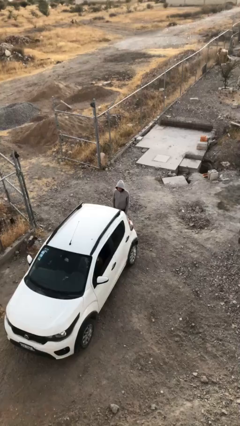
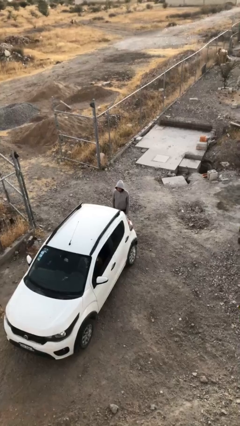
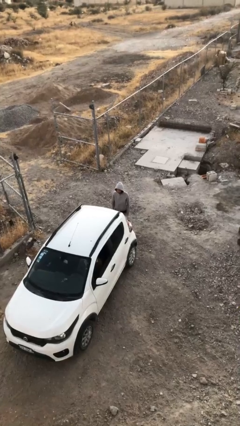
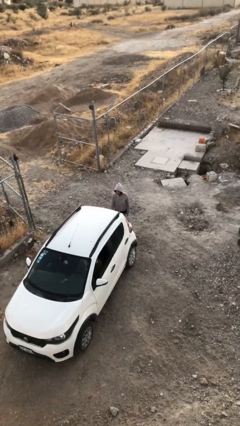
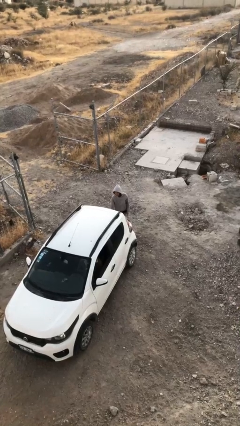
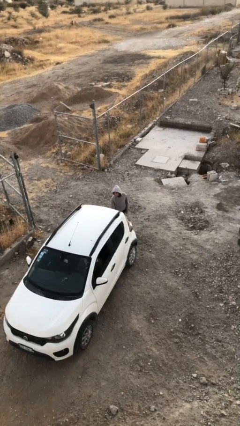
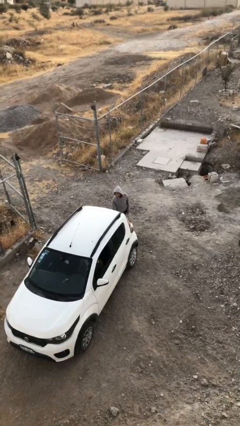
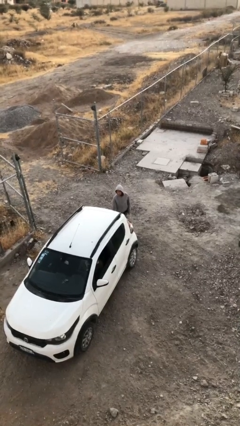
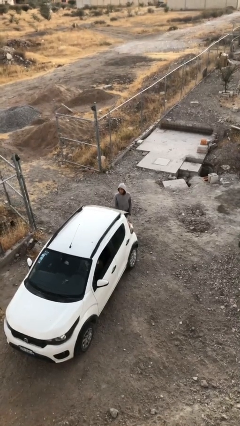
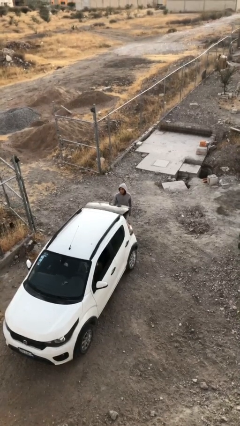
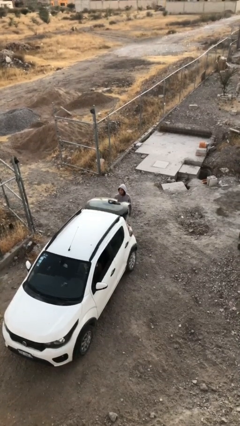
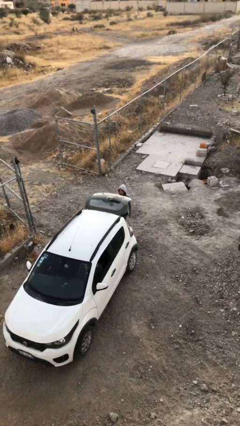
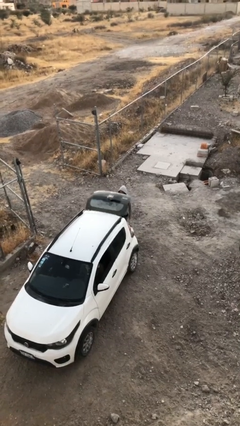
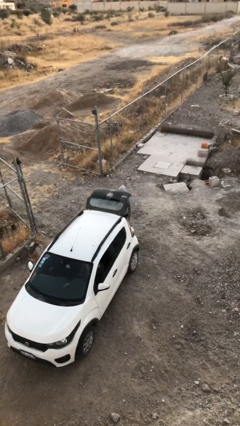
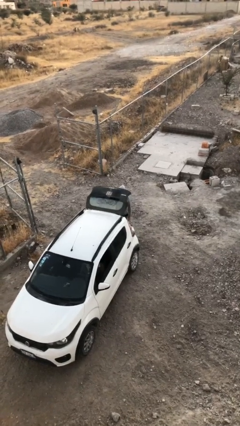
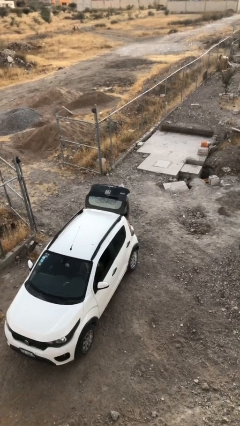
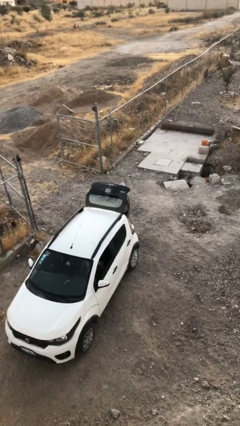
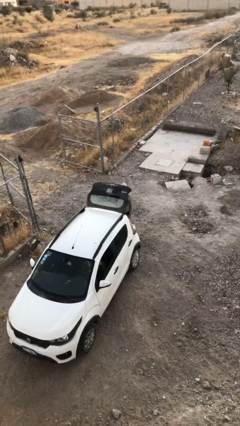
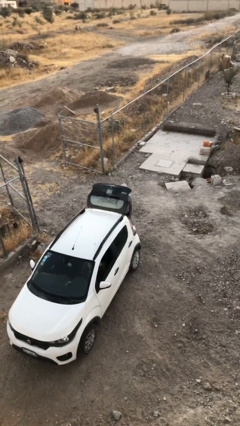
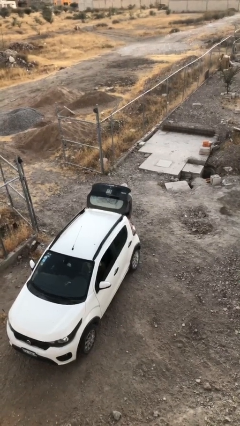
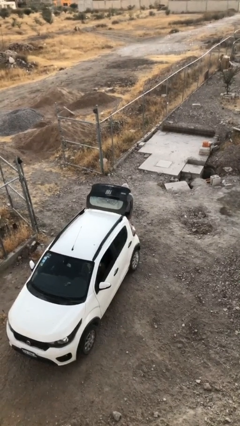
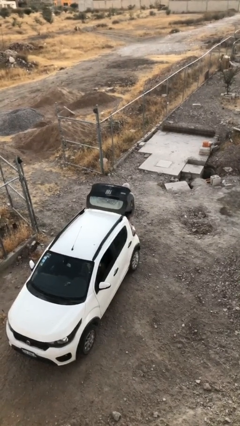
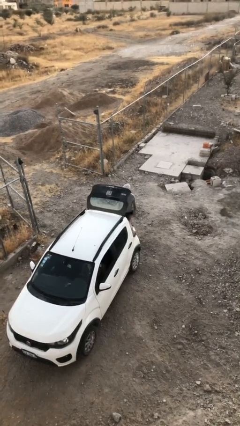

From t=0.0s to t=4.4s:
person opens car trunk

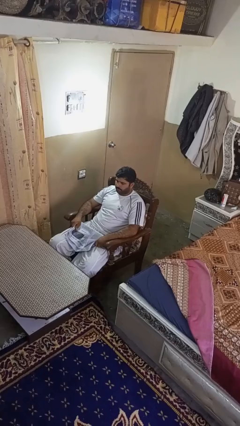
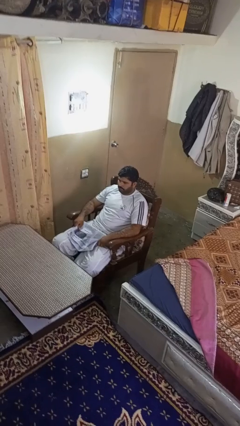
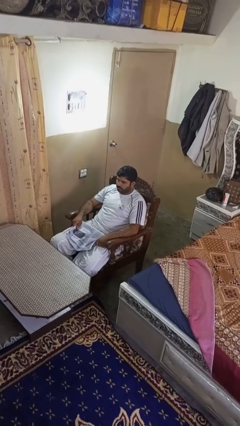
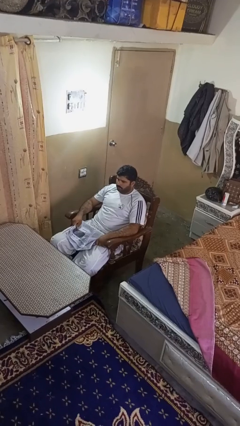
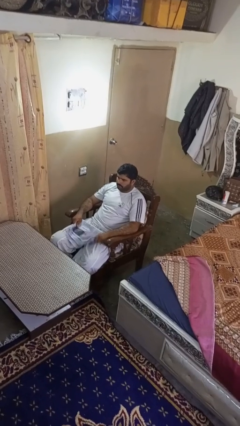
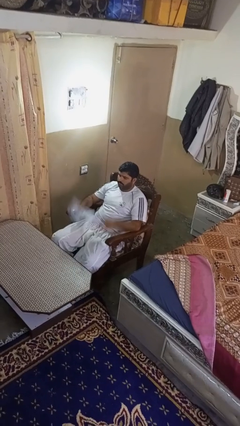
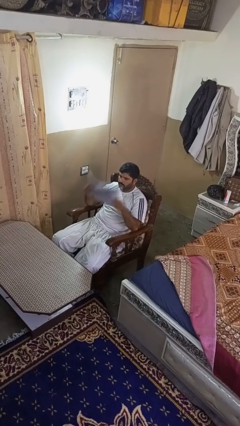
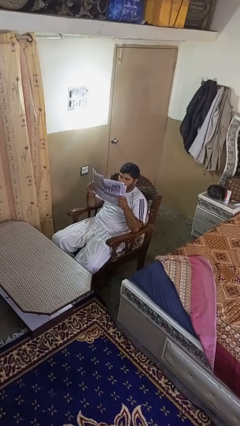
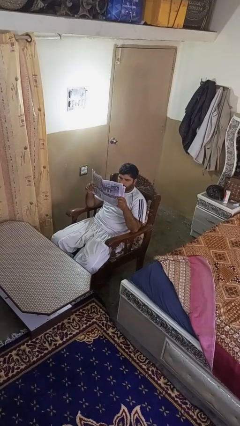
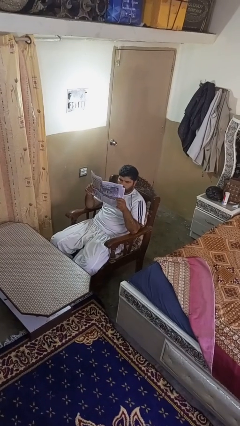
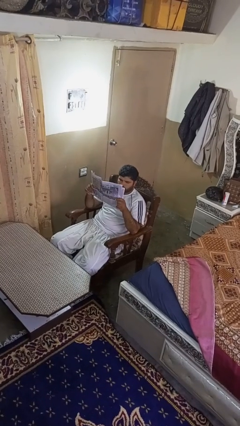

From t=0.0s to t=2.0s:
person reads newspaper

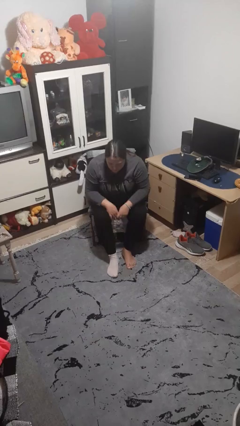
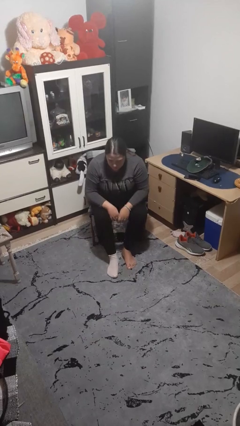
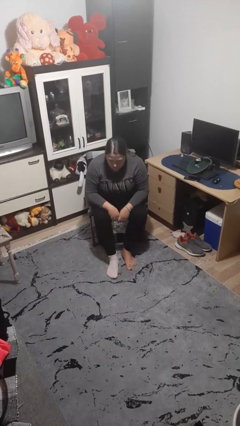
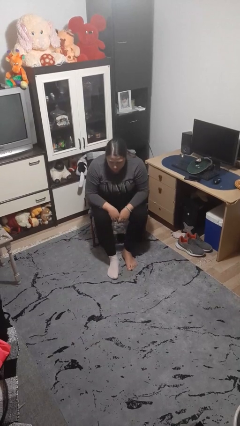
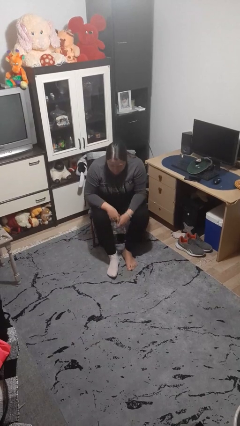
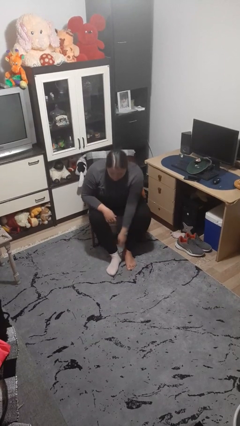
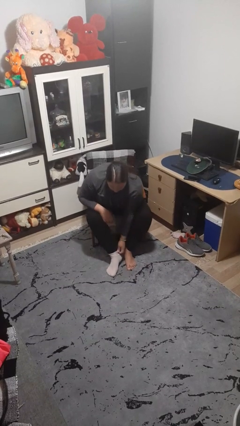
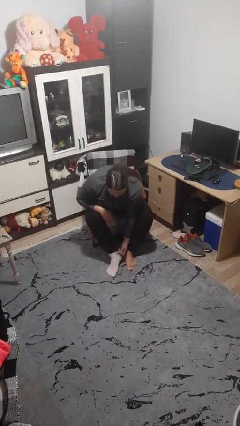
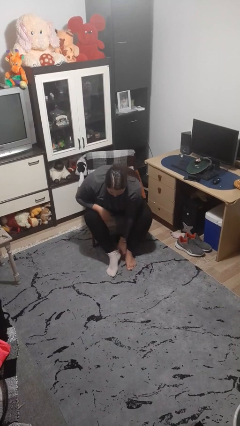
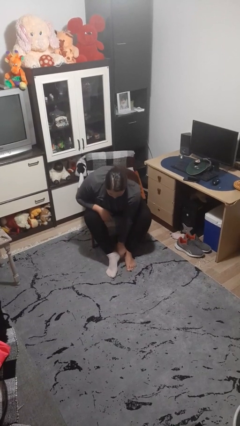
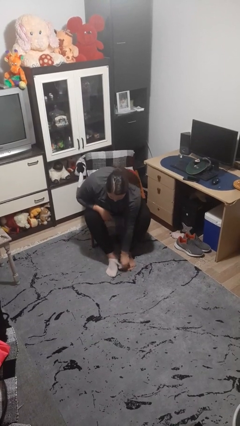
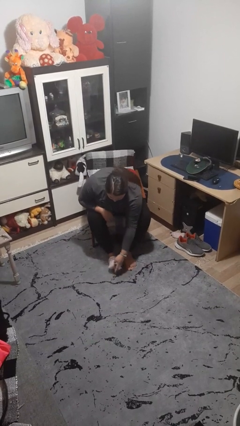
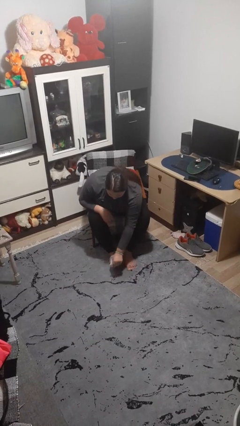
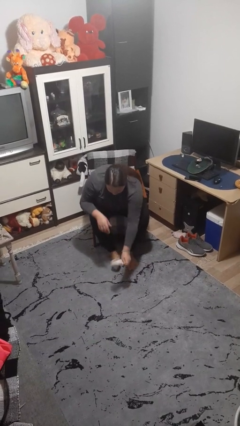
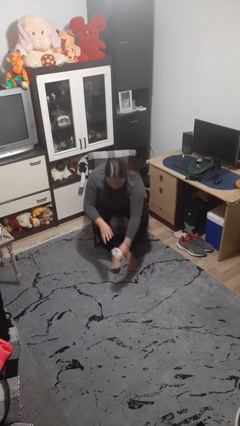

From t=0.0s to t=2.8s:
person takes off socks

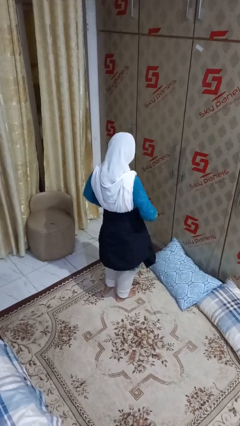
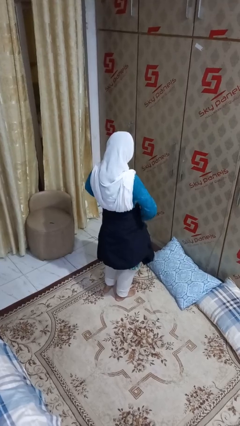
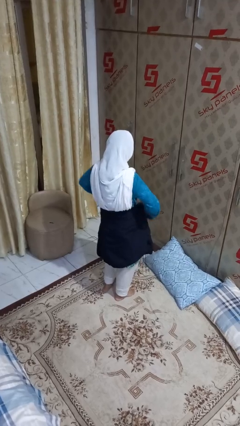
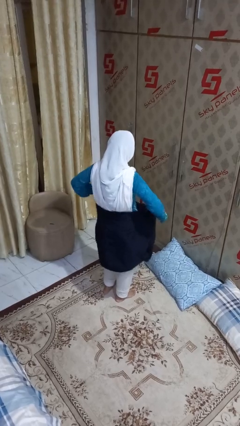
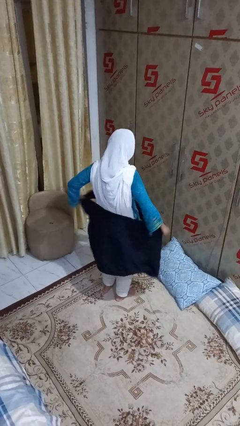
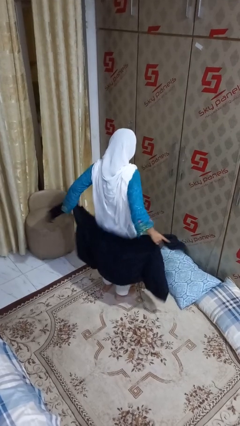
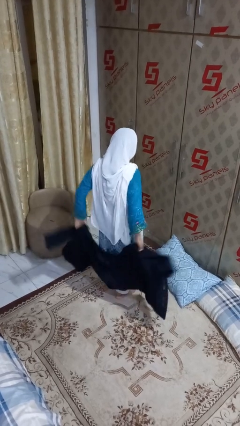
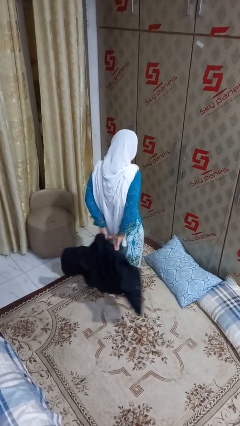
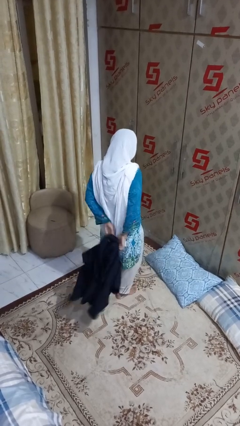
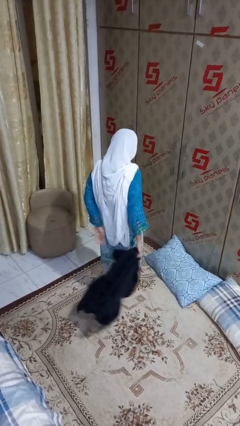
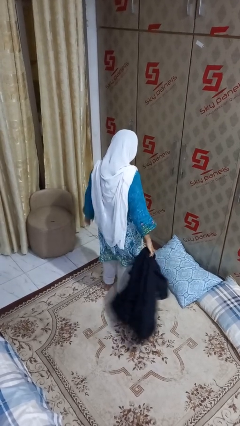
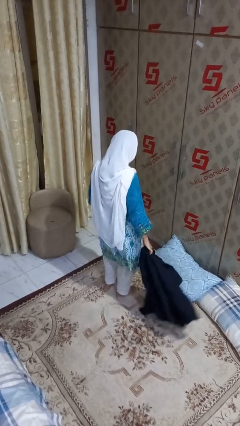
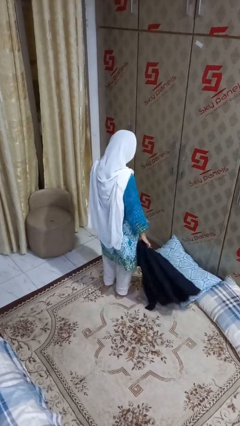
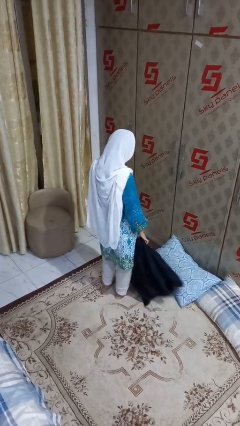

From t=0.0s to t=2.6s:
person unties jacket around waist

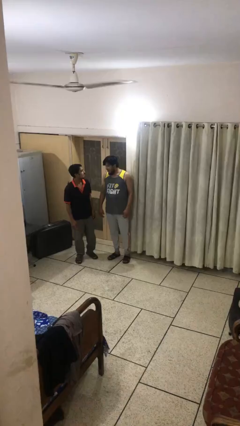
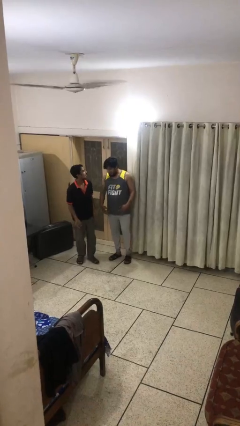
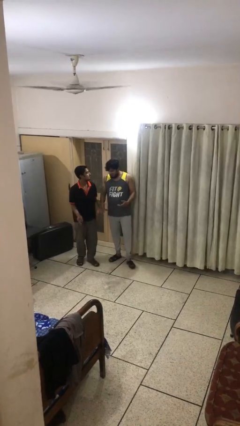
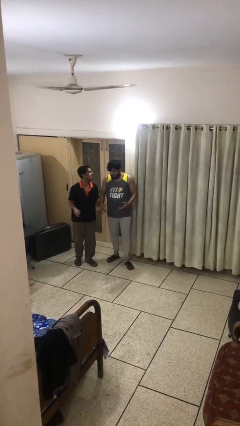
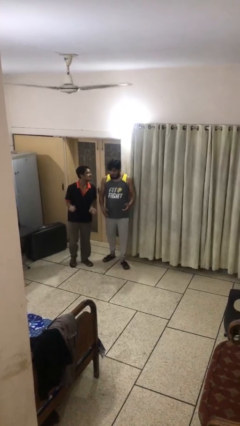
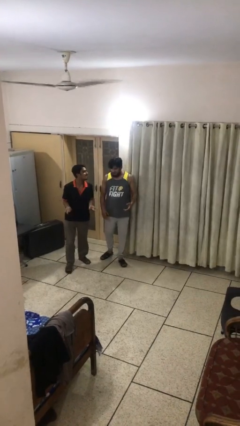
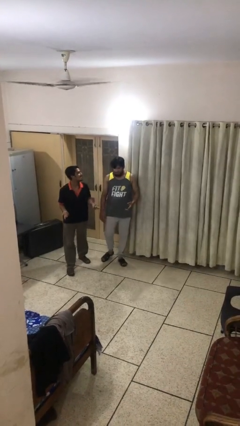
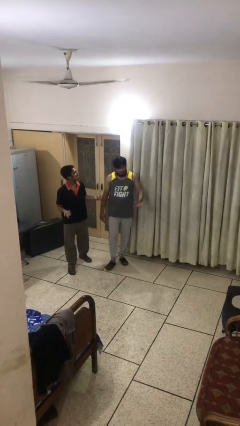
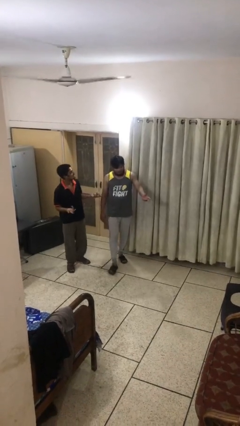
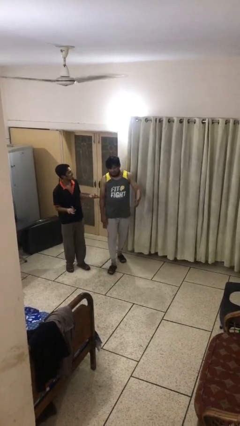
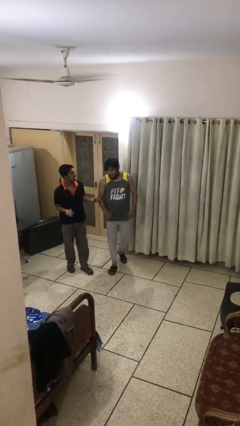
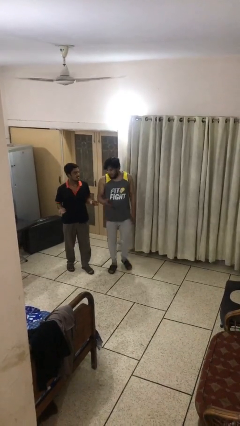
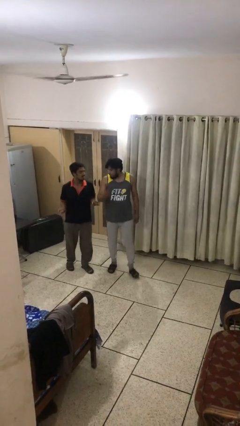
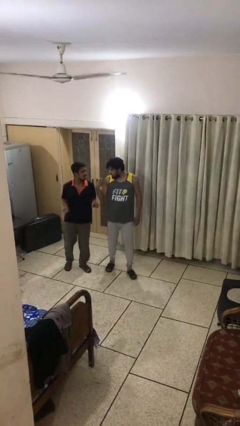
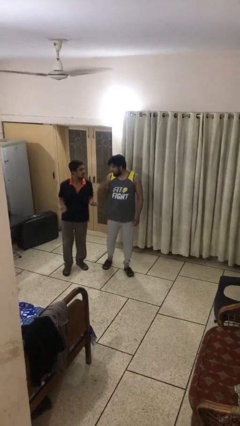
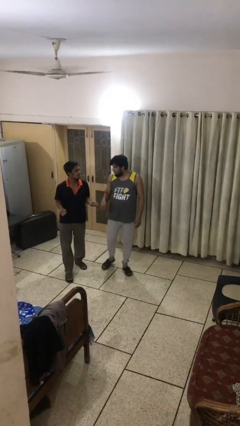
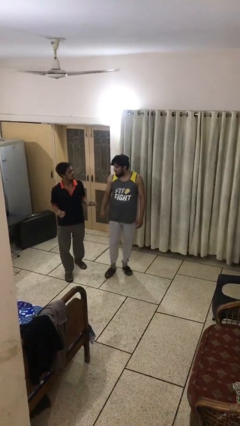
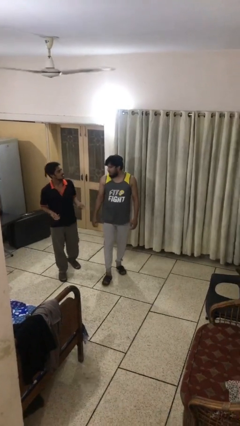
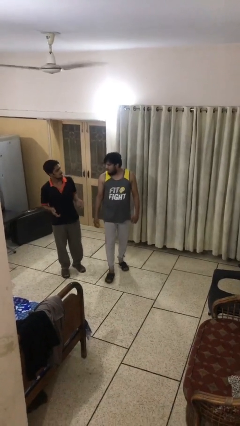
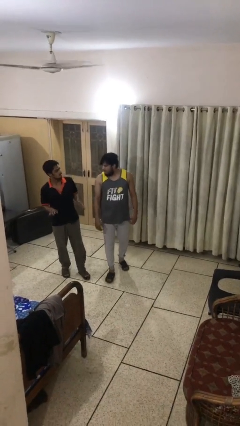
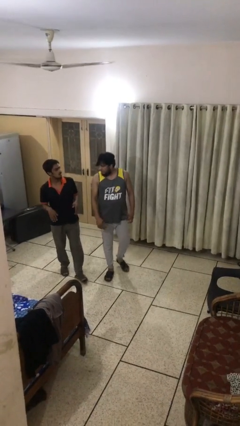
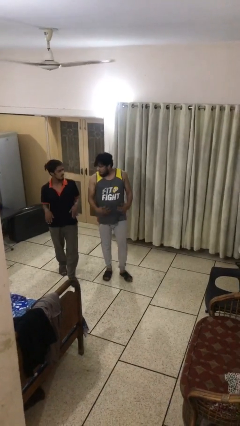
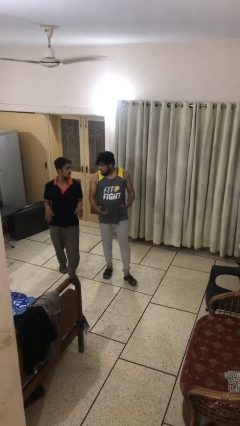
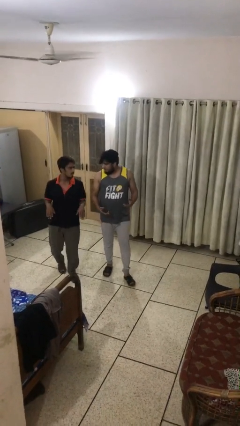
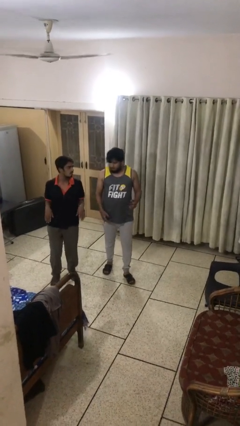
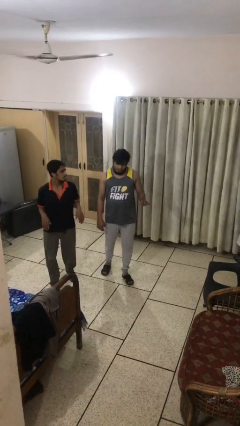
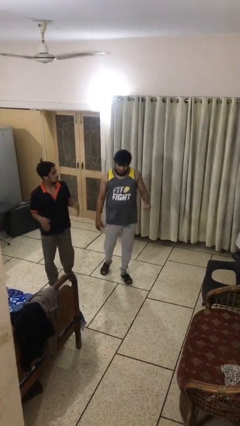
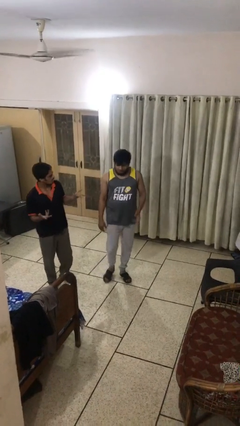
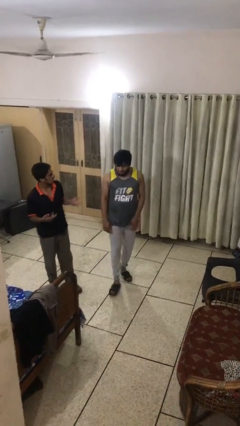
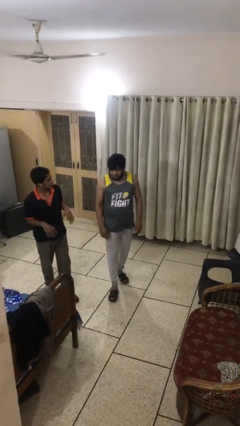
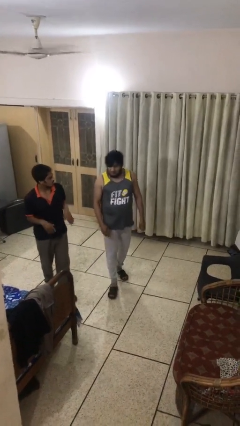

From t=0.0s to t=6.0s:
person talks to person
